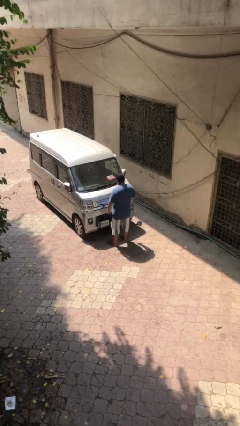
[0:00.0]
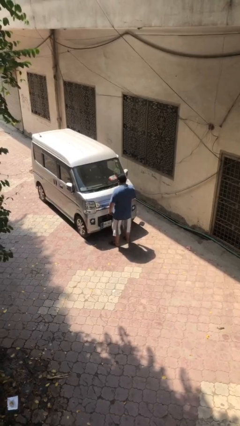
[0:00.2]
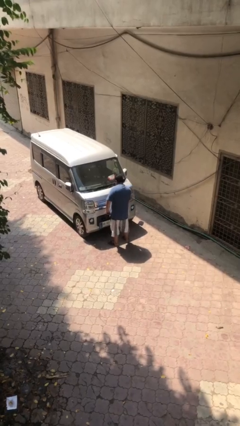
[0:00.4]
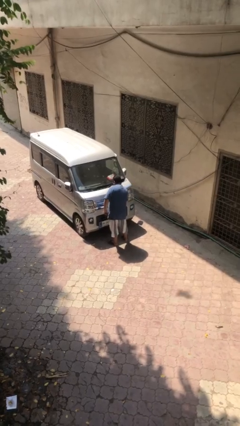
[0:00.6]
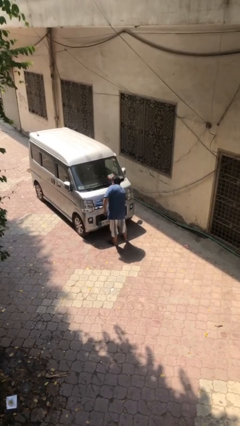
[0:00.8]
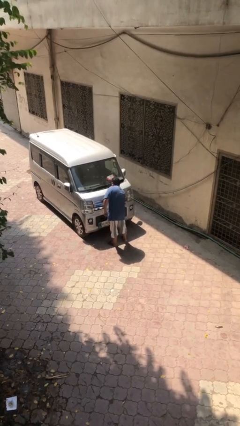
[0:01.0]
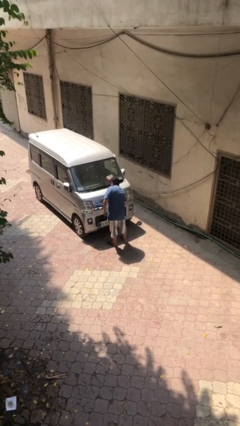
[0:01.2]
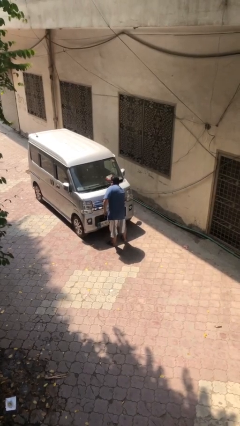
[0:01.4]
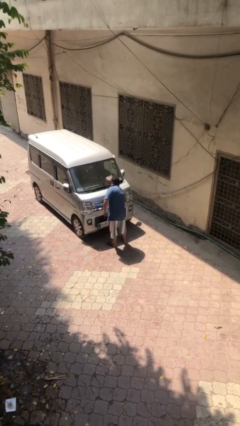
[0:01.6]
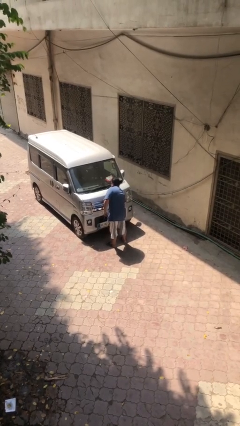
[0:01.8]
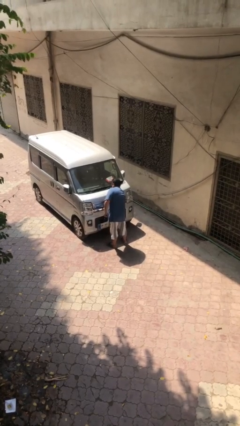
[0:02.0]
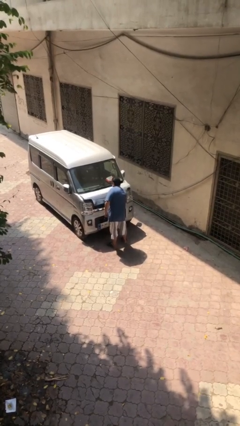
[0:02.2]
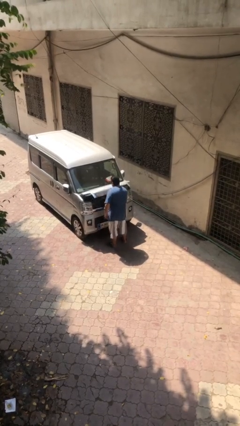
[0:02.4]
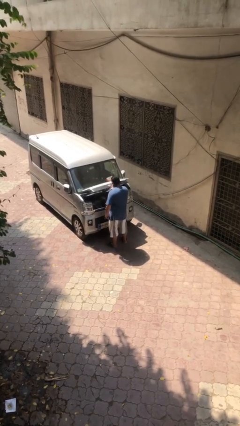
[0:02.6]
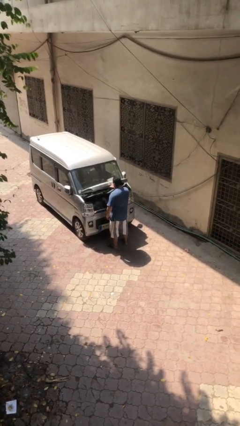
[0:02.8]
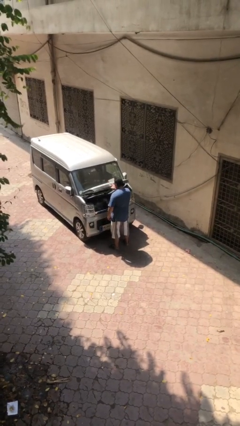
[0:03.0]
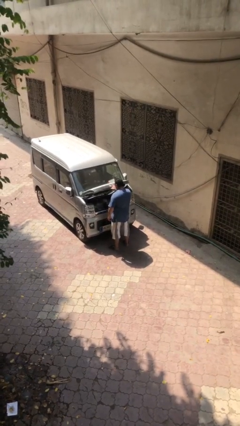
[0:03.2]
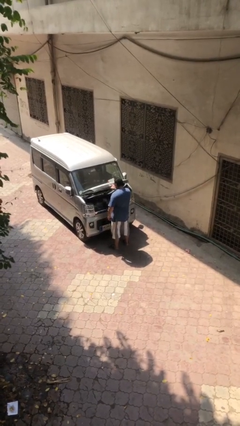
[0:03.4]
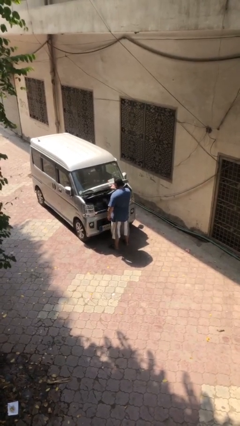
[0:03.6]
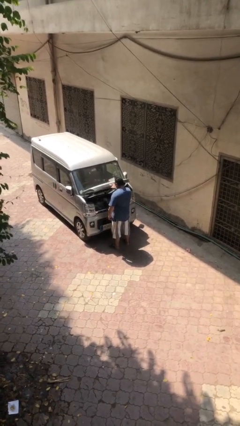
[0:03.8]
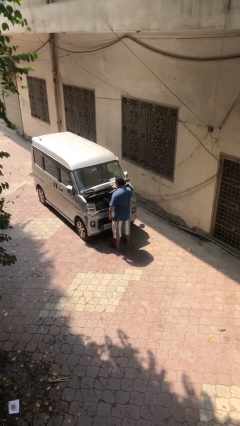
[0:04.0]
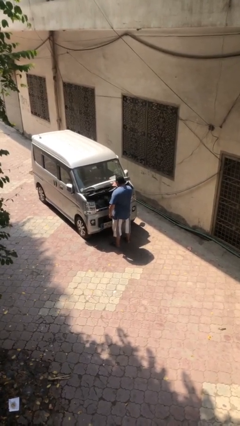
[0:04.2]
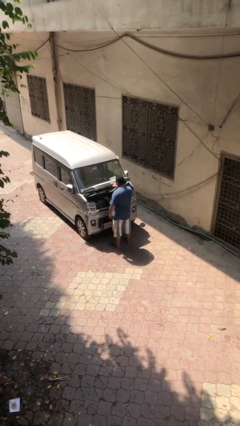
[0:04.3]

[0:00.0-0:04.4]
person opens car hood

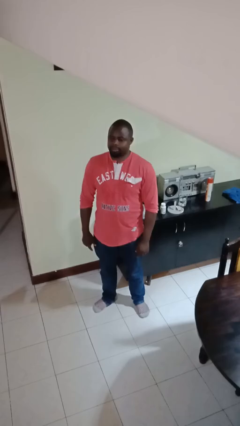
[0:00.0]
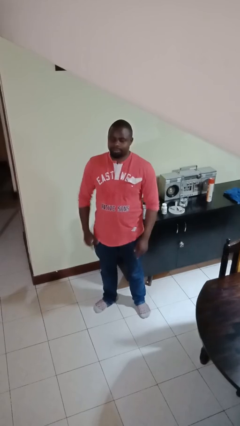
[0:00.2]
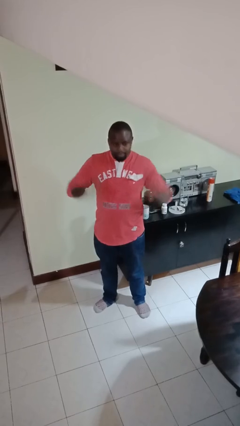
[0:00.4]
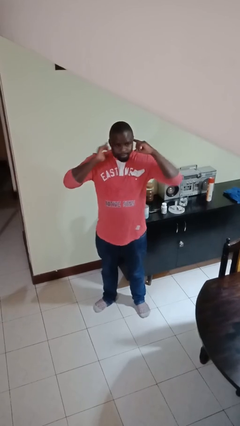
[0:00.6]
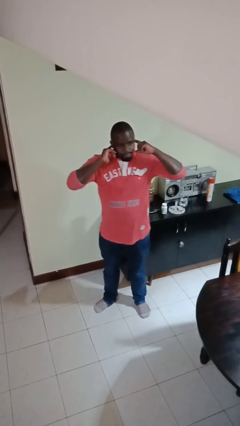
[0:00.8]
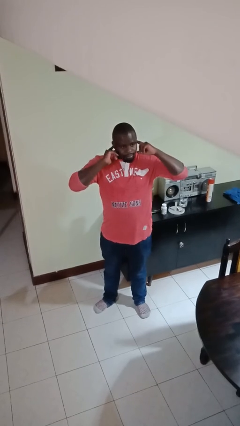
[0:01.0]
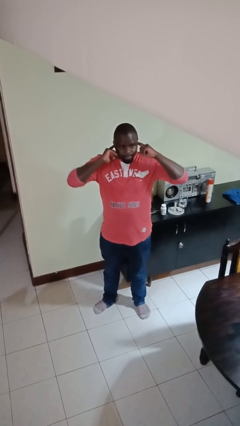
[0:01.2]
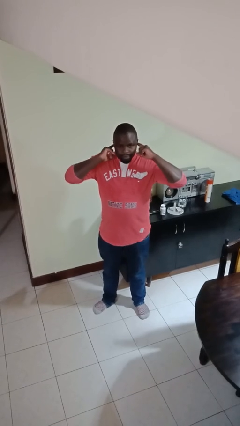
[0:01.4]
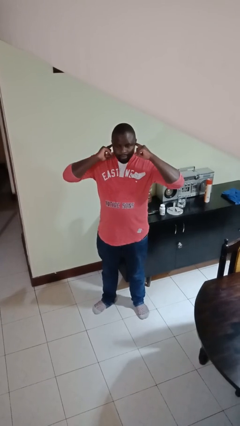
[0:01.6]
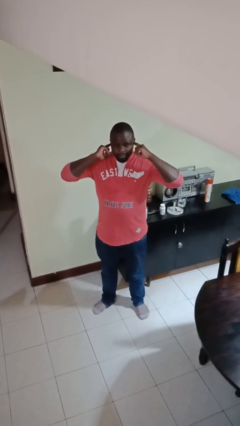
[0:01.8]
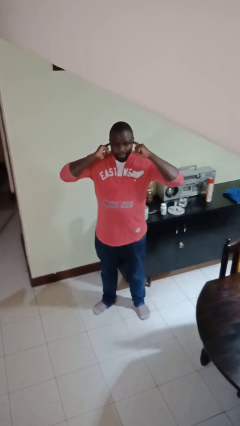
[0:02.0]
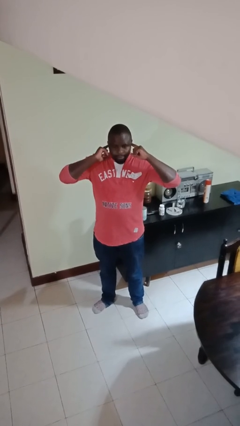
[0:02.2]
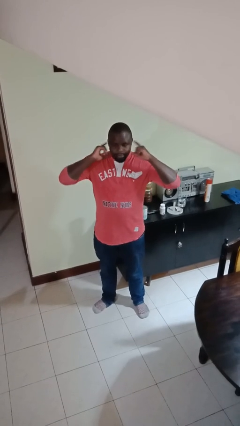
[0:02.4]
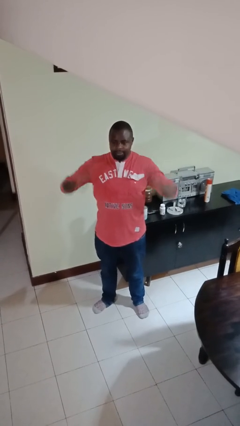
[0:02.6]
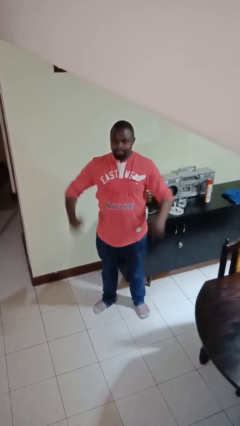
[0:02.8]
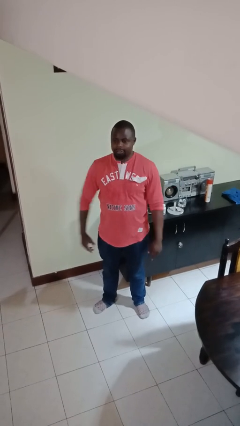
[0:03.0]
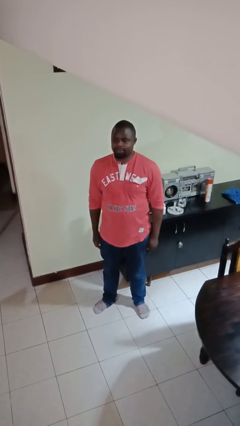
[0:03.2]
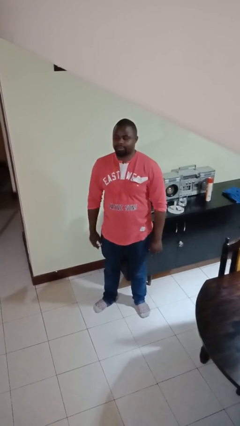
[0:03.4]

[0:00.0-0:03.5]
person puts fingers in ear

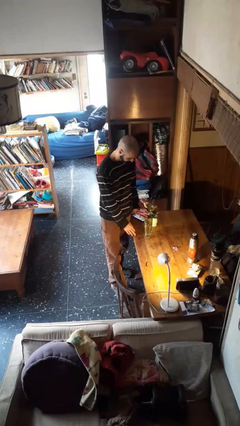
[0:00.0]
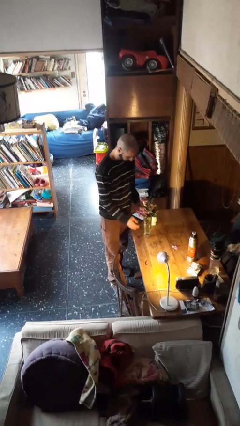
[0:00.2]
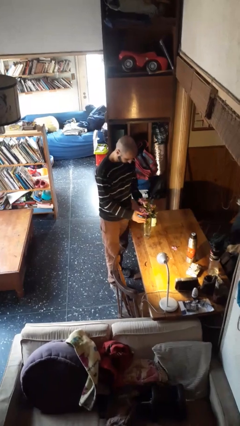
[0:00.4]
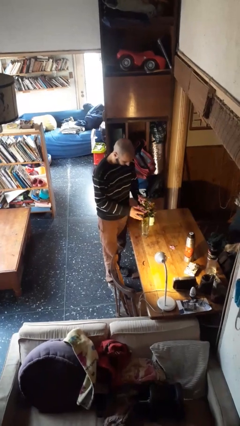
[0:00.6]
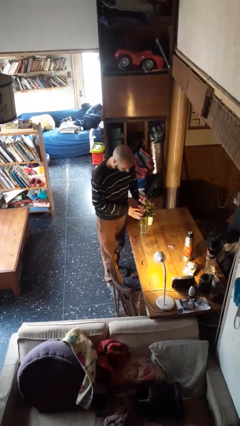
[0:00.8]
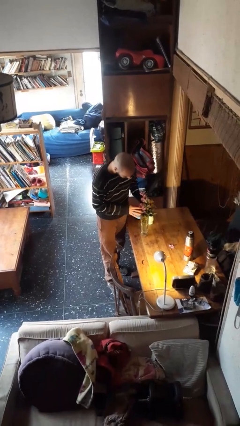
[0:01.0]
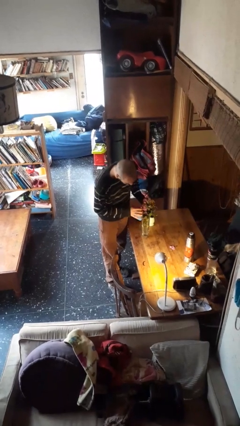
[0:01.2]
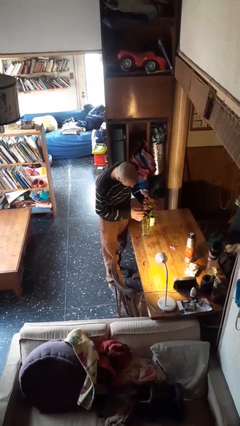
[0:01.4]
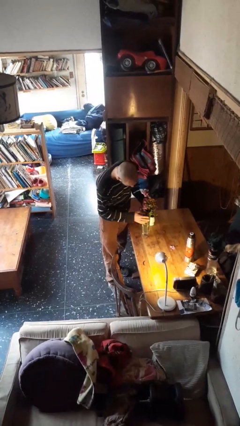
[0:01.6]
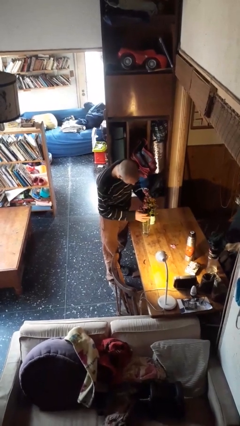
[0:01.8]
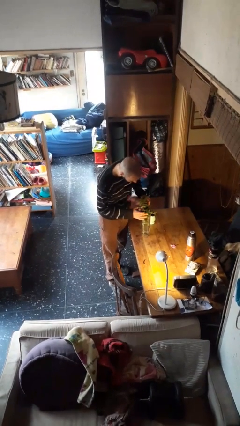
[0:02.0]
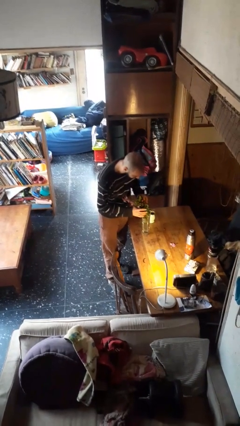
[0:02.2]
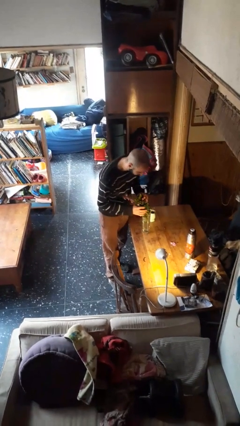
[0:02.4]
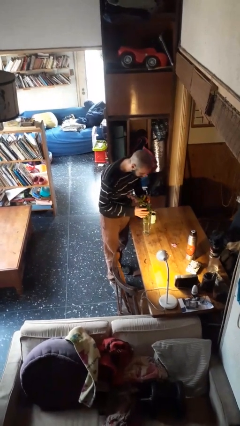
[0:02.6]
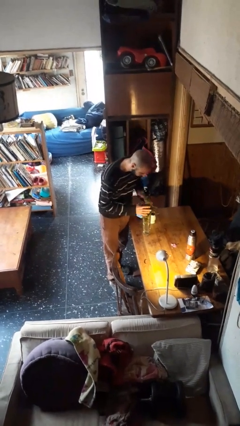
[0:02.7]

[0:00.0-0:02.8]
person arranges flowers in vase

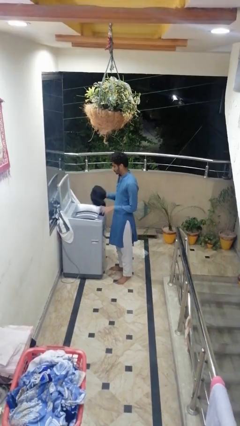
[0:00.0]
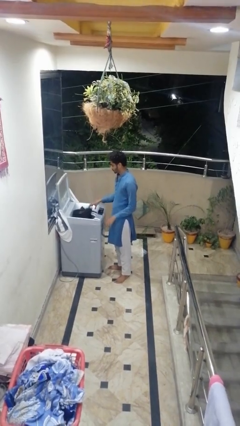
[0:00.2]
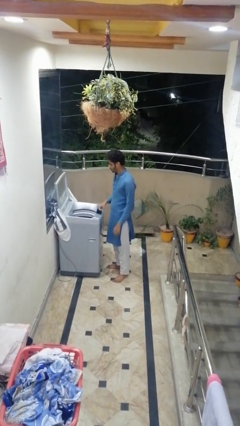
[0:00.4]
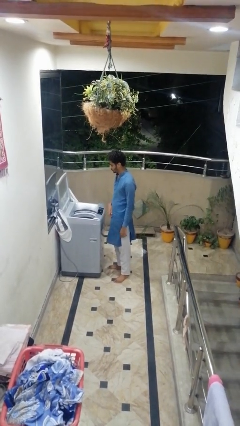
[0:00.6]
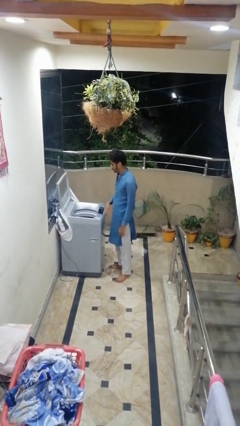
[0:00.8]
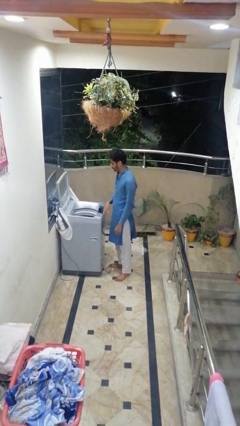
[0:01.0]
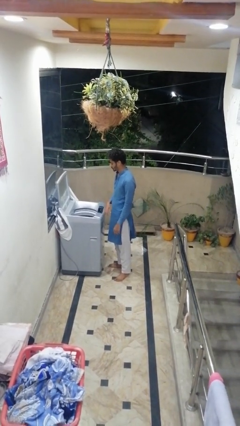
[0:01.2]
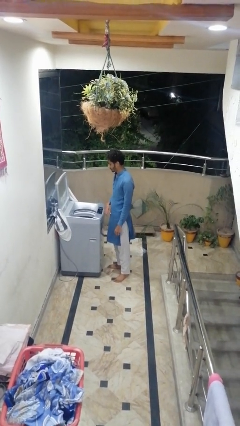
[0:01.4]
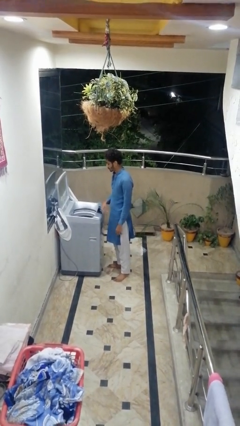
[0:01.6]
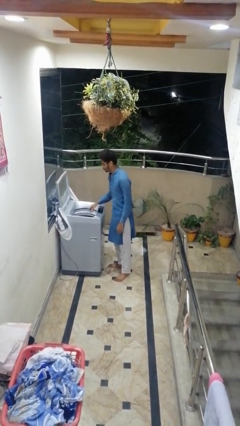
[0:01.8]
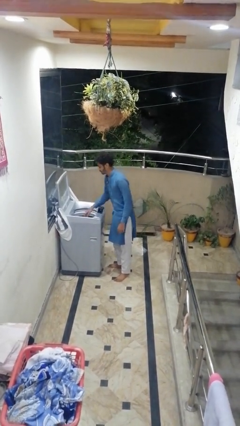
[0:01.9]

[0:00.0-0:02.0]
person loads clotheswasher

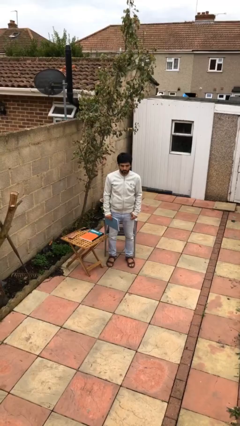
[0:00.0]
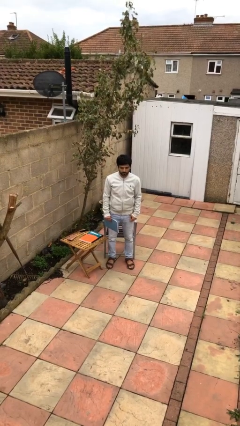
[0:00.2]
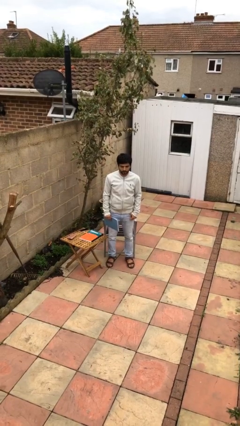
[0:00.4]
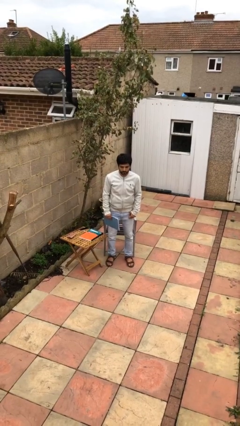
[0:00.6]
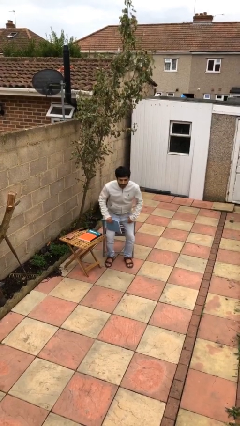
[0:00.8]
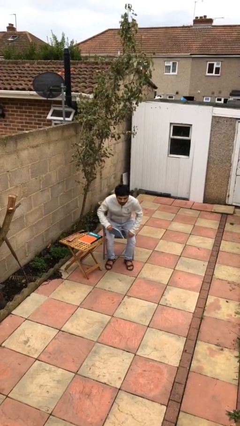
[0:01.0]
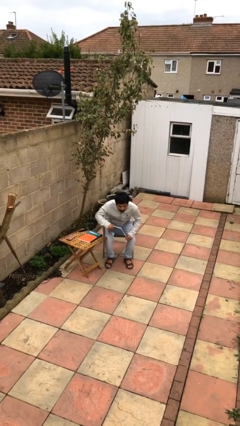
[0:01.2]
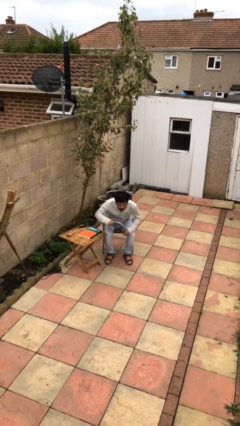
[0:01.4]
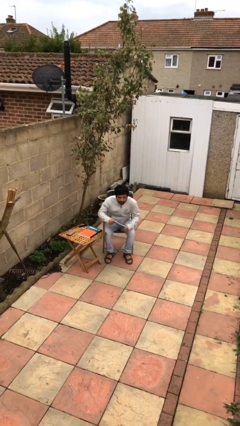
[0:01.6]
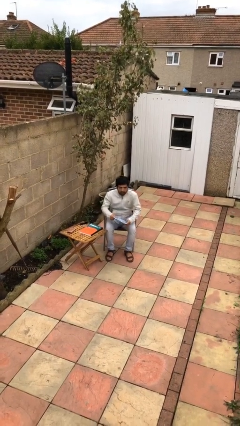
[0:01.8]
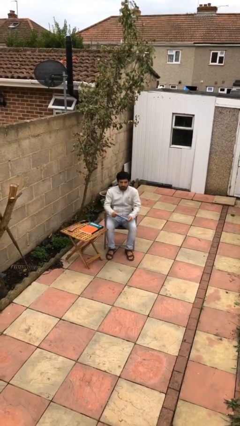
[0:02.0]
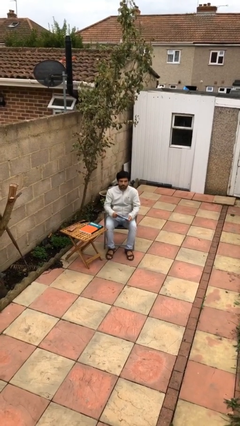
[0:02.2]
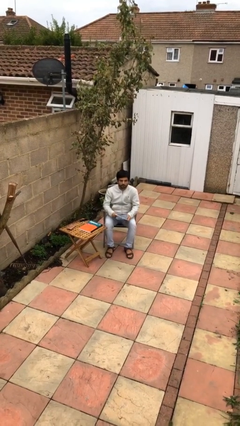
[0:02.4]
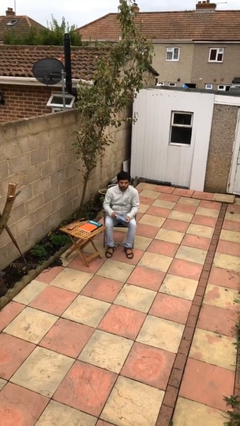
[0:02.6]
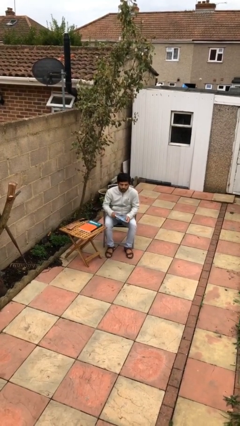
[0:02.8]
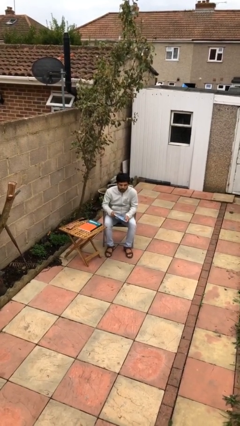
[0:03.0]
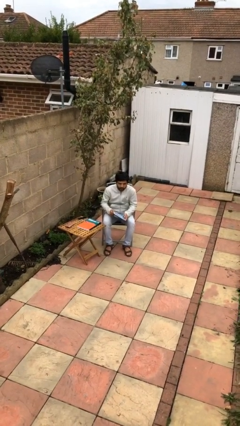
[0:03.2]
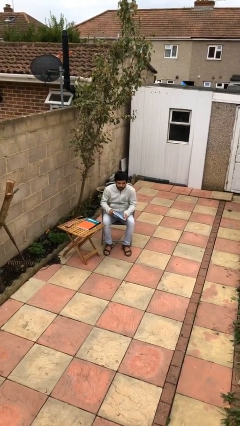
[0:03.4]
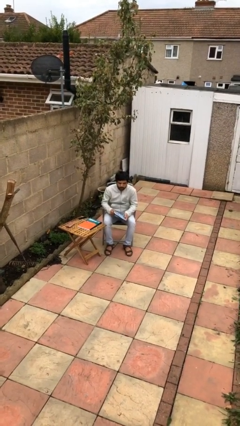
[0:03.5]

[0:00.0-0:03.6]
person sits down

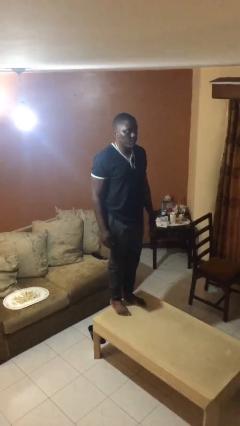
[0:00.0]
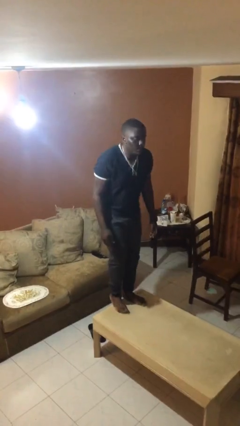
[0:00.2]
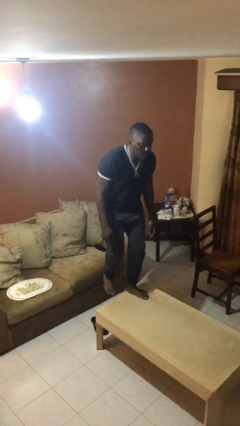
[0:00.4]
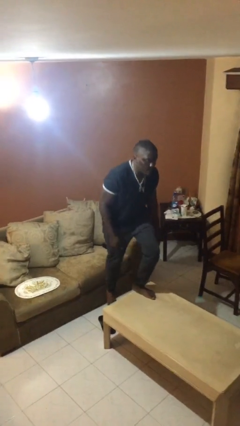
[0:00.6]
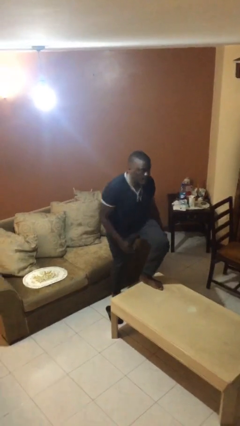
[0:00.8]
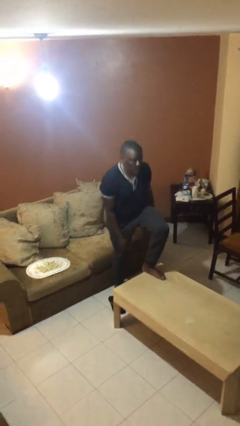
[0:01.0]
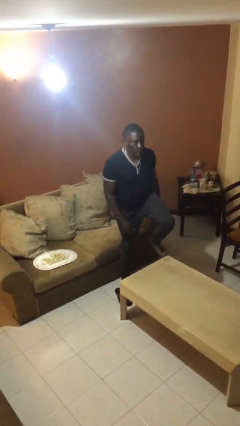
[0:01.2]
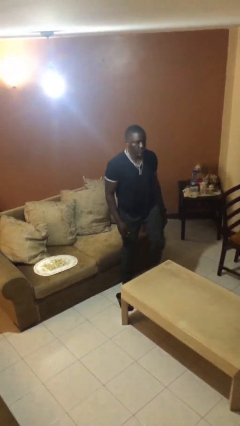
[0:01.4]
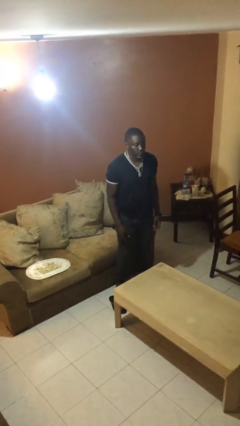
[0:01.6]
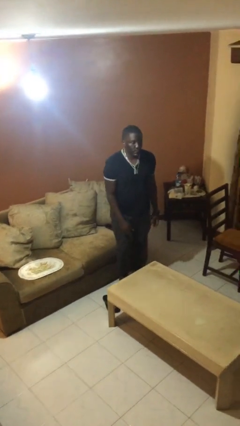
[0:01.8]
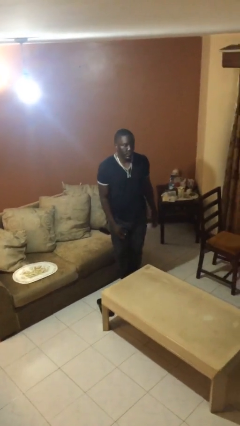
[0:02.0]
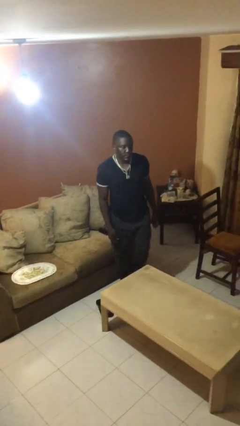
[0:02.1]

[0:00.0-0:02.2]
person climbs off table
